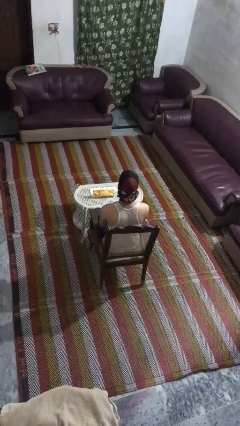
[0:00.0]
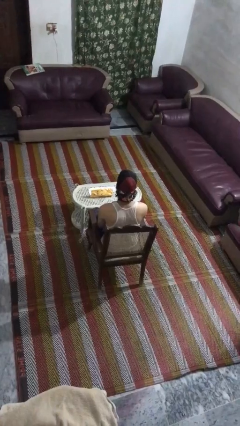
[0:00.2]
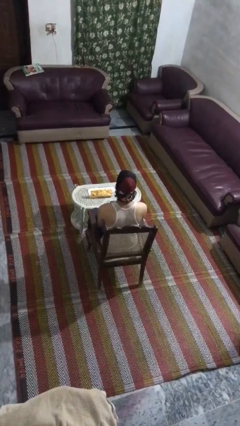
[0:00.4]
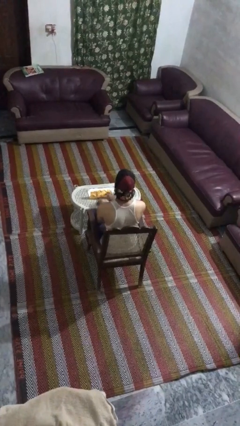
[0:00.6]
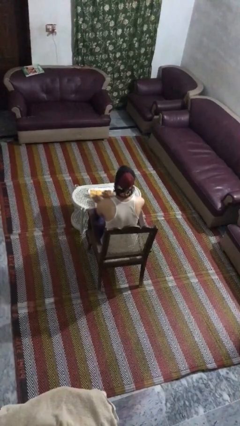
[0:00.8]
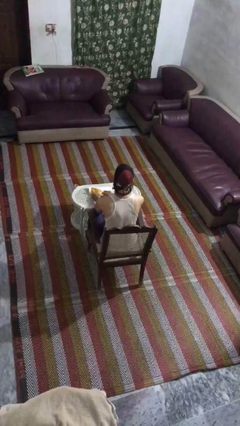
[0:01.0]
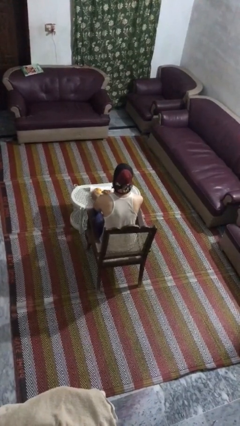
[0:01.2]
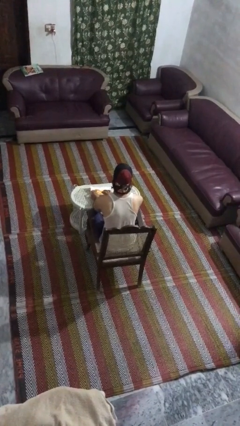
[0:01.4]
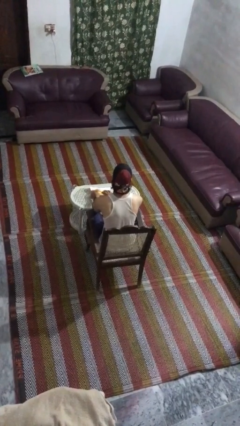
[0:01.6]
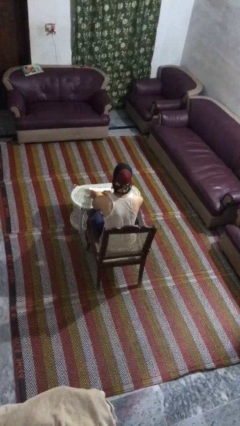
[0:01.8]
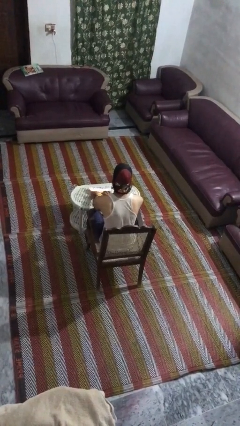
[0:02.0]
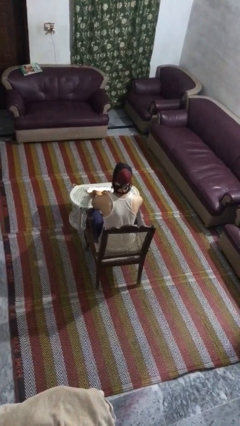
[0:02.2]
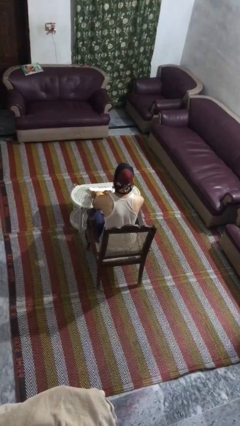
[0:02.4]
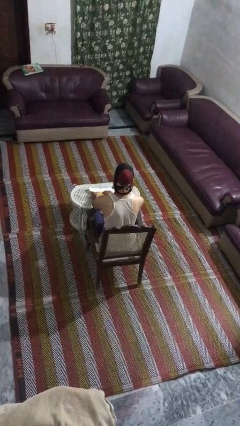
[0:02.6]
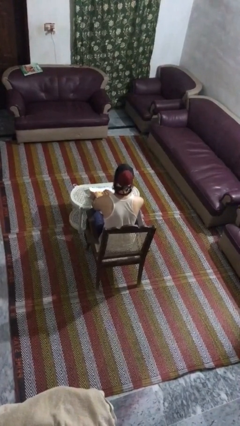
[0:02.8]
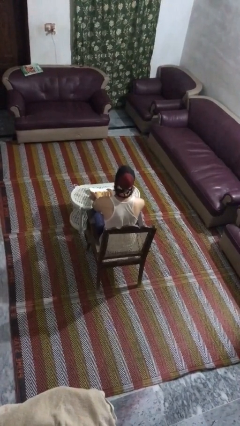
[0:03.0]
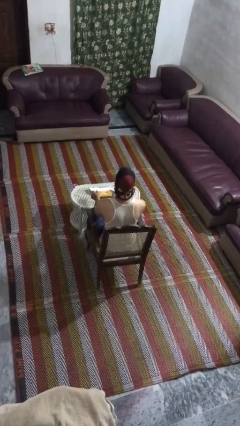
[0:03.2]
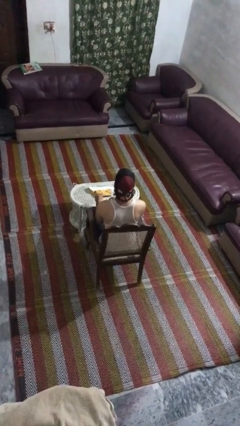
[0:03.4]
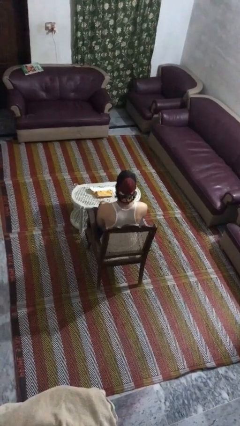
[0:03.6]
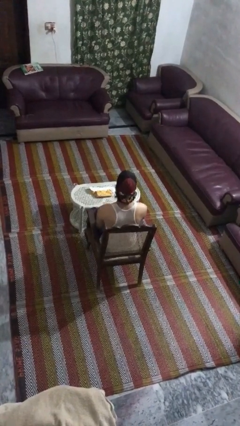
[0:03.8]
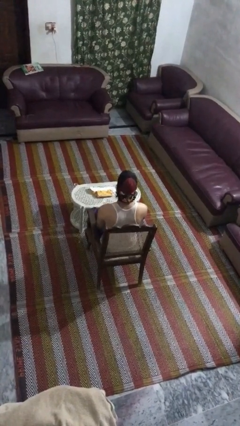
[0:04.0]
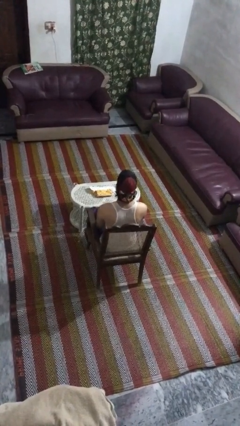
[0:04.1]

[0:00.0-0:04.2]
person wraps box

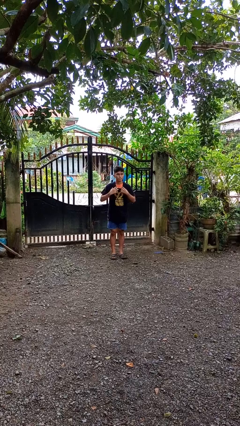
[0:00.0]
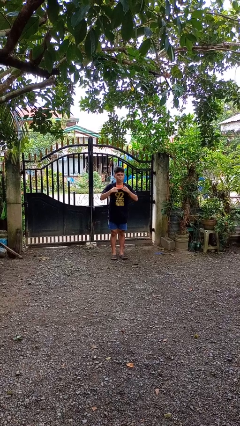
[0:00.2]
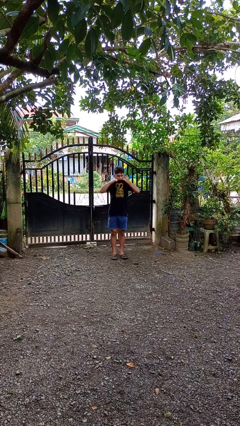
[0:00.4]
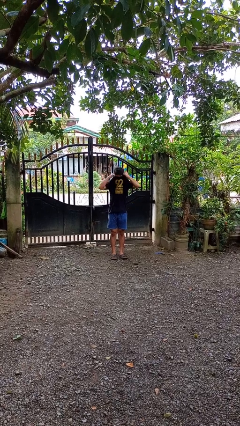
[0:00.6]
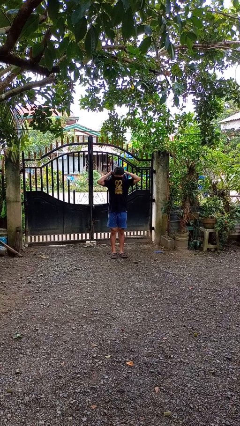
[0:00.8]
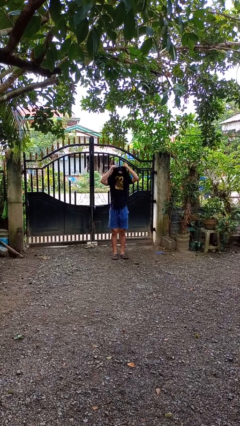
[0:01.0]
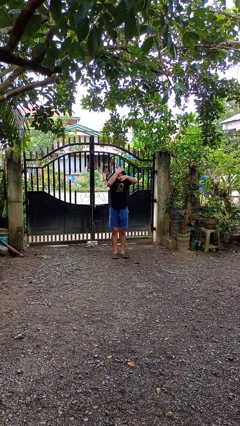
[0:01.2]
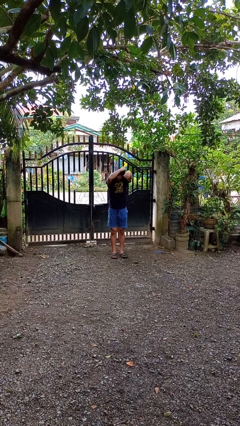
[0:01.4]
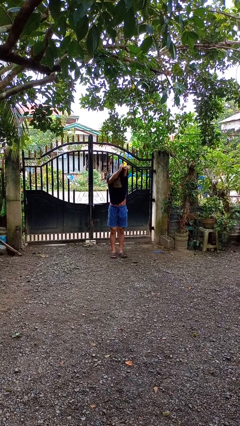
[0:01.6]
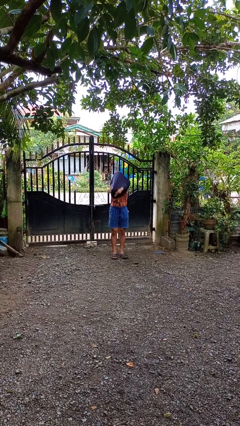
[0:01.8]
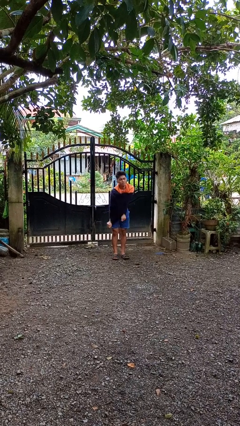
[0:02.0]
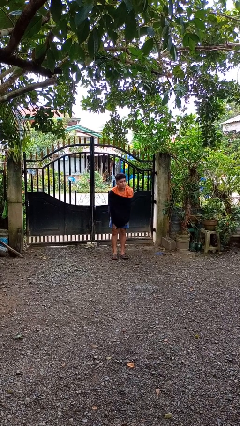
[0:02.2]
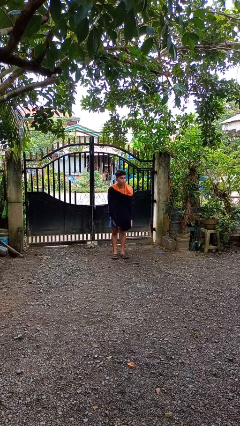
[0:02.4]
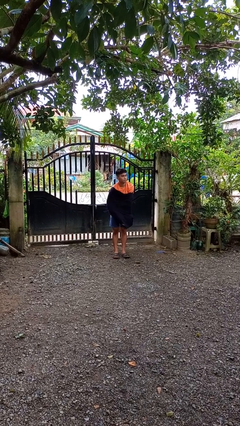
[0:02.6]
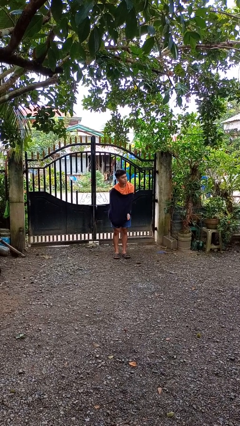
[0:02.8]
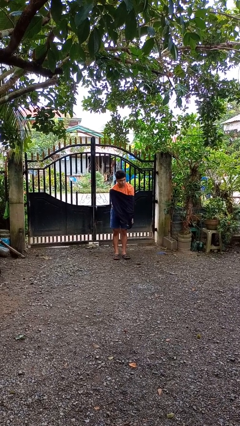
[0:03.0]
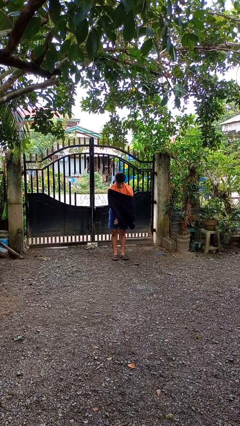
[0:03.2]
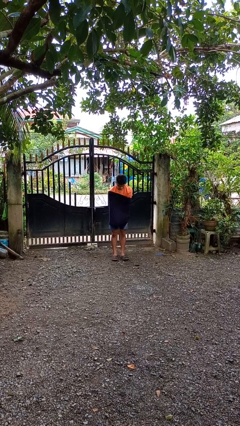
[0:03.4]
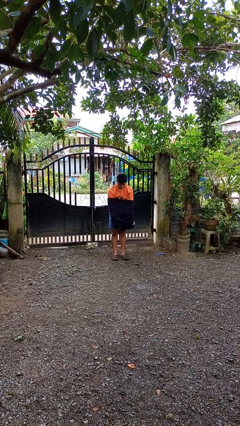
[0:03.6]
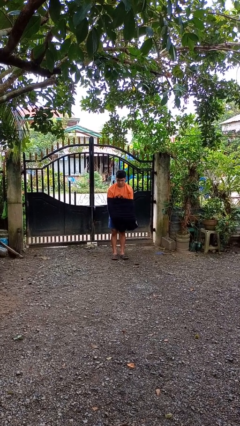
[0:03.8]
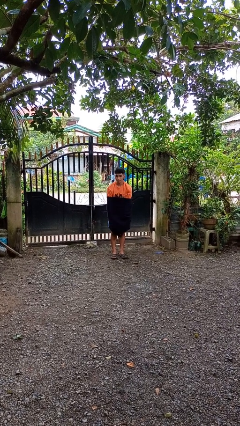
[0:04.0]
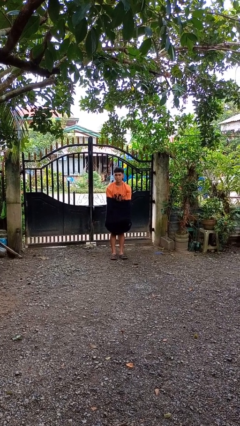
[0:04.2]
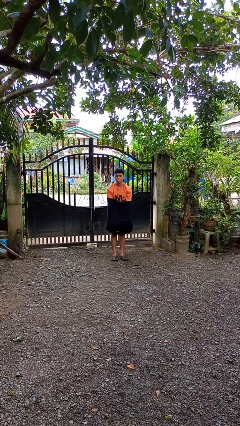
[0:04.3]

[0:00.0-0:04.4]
person takes off shirt

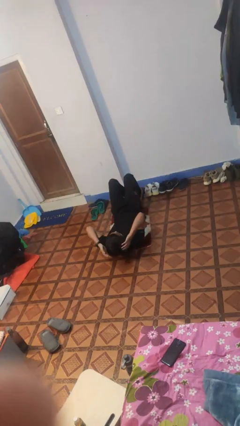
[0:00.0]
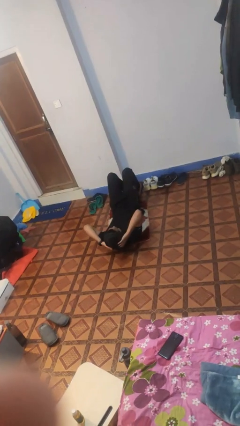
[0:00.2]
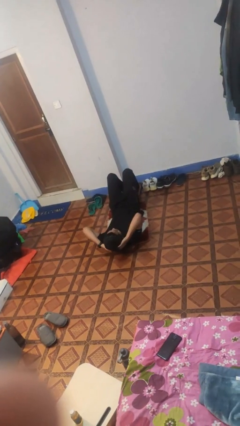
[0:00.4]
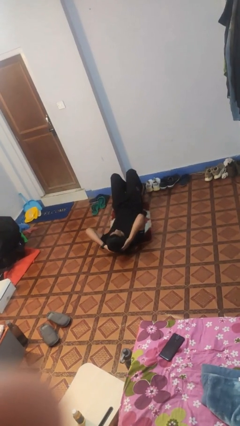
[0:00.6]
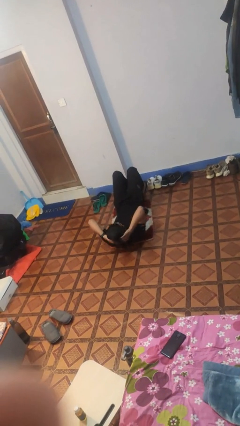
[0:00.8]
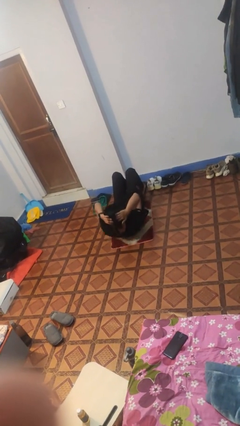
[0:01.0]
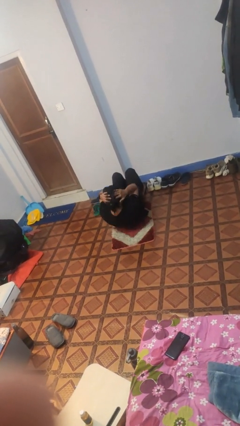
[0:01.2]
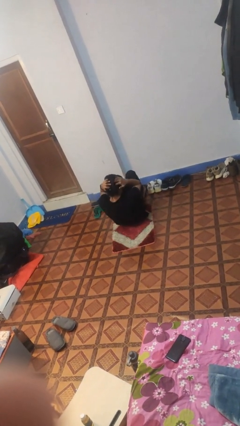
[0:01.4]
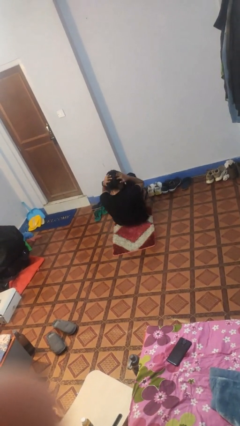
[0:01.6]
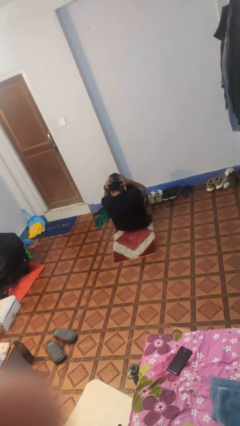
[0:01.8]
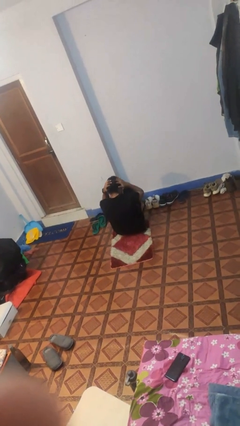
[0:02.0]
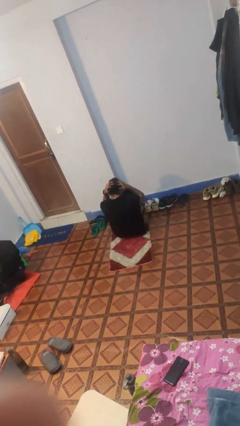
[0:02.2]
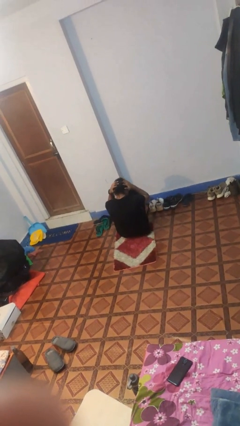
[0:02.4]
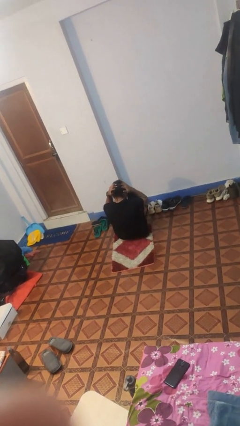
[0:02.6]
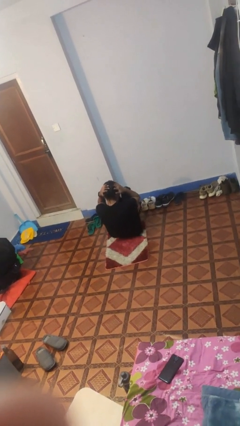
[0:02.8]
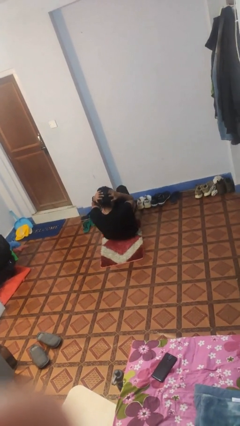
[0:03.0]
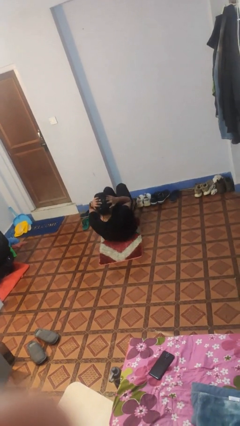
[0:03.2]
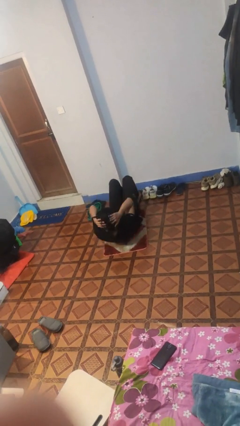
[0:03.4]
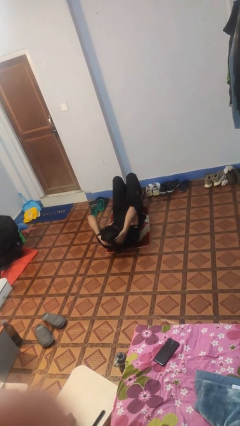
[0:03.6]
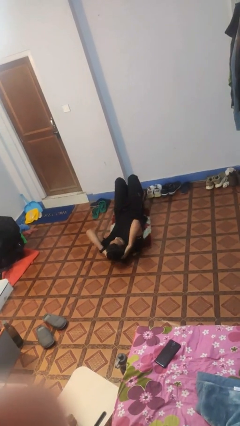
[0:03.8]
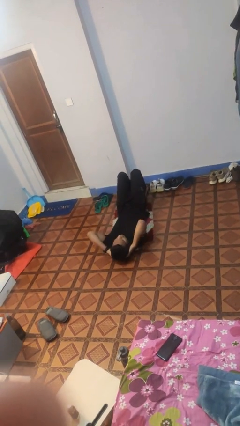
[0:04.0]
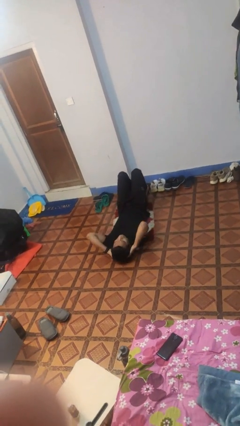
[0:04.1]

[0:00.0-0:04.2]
person exercises with situp

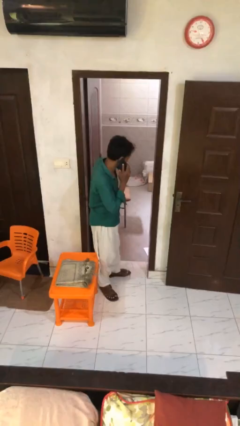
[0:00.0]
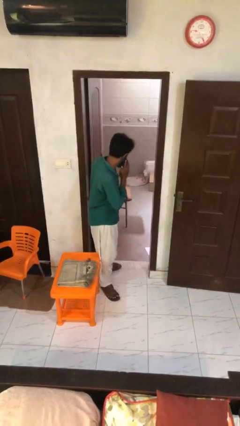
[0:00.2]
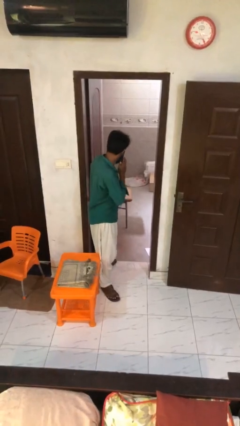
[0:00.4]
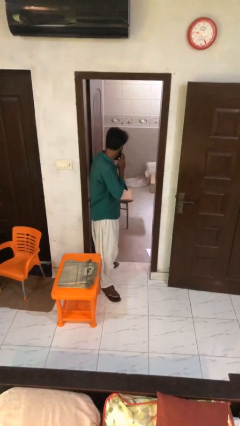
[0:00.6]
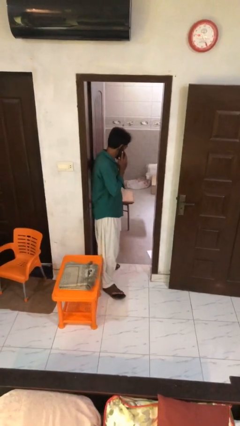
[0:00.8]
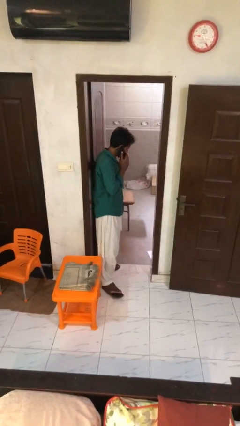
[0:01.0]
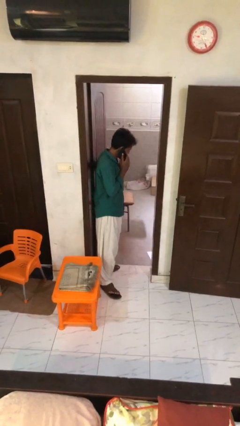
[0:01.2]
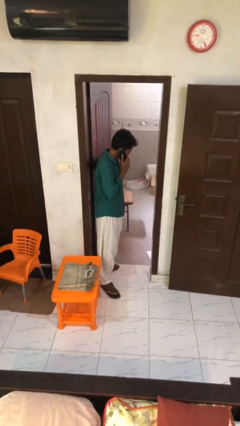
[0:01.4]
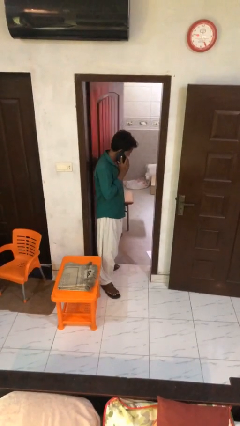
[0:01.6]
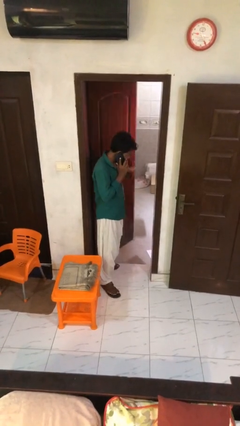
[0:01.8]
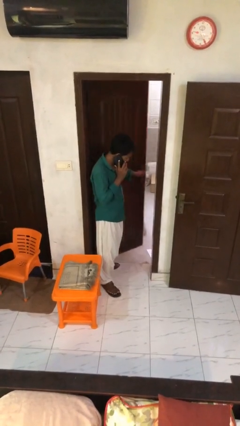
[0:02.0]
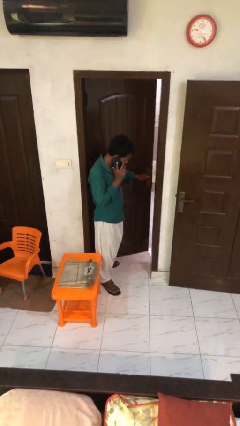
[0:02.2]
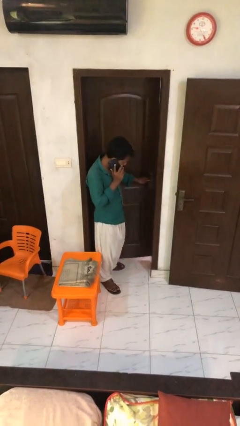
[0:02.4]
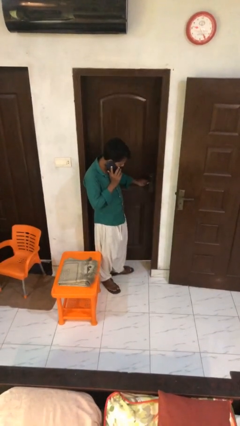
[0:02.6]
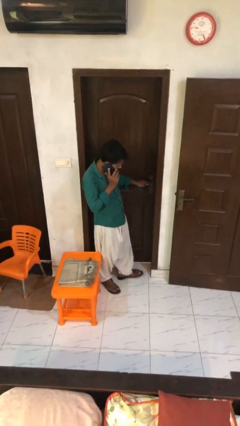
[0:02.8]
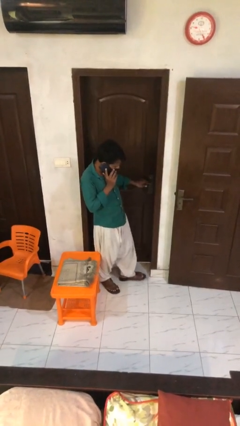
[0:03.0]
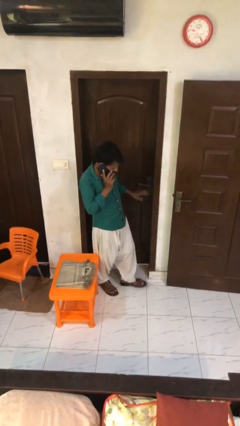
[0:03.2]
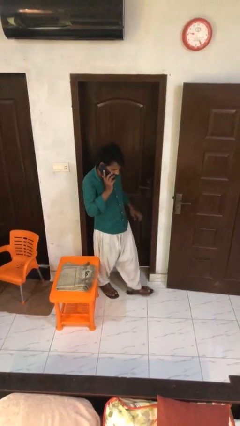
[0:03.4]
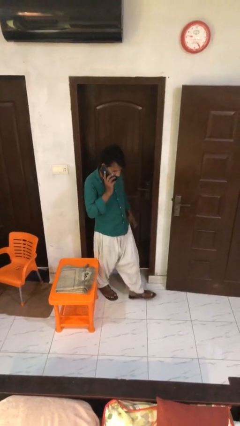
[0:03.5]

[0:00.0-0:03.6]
person closes facility door

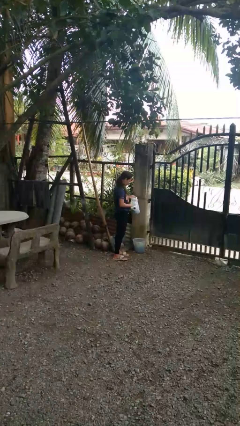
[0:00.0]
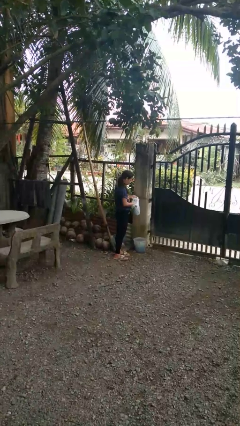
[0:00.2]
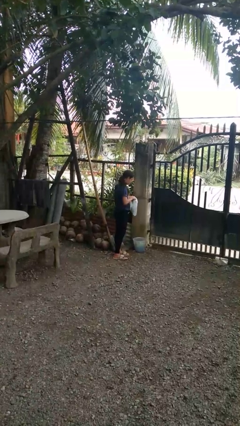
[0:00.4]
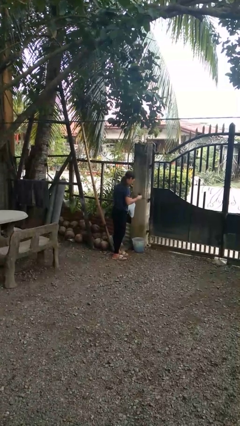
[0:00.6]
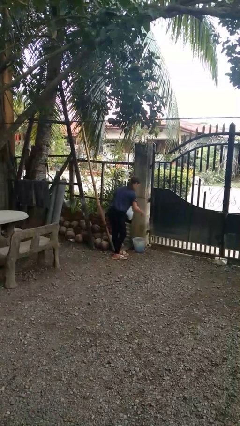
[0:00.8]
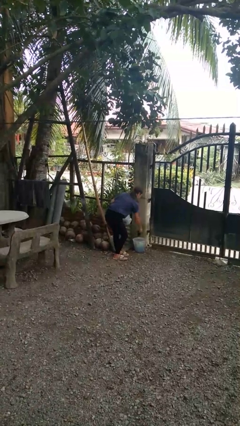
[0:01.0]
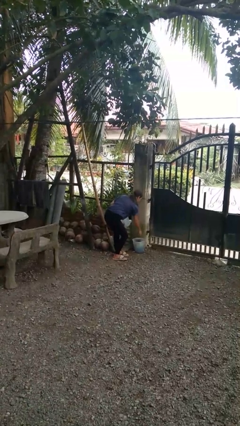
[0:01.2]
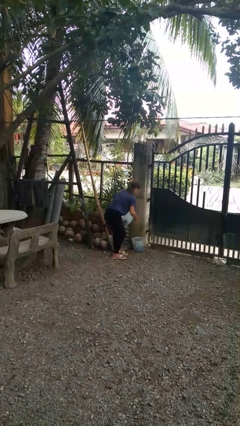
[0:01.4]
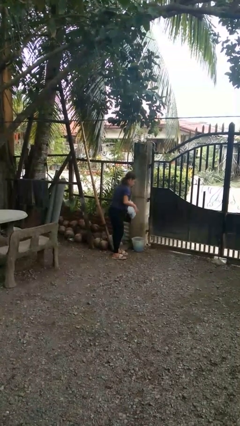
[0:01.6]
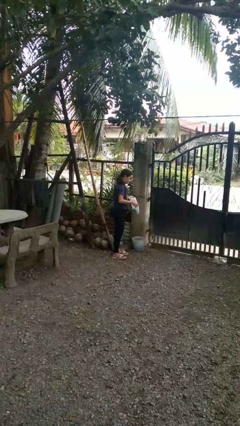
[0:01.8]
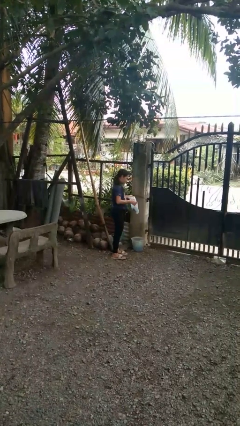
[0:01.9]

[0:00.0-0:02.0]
person discards trash
